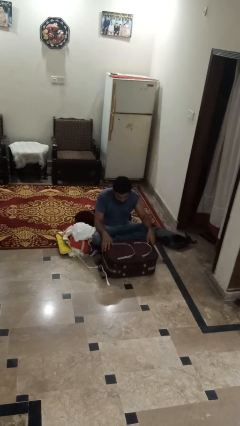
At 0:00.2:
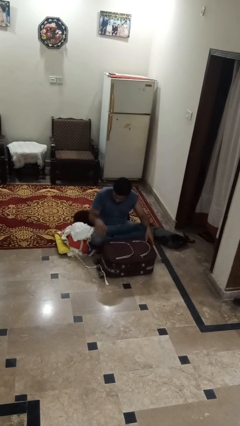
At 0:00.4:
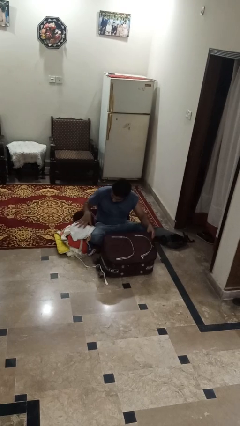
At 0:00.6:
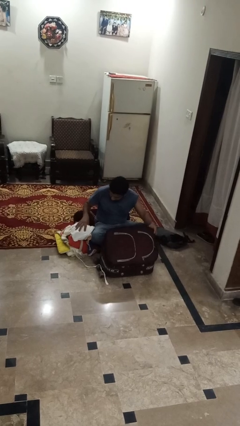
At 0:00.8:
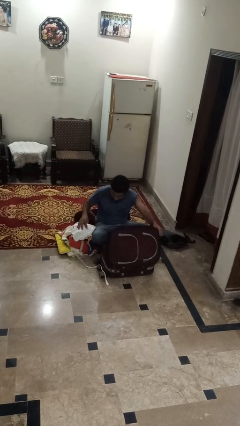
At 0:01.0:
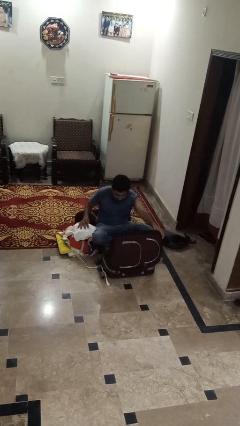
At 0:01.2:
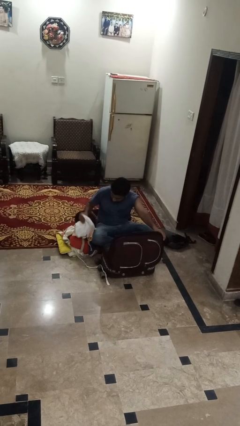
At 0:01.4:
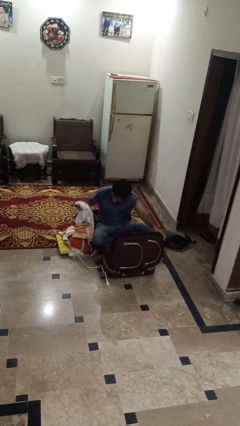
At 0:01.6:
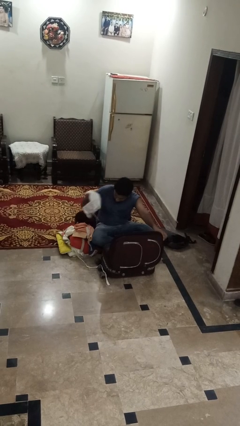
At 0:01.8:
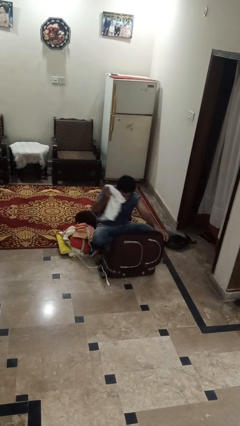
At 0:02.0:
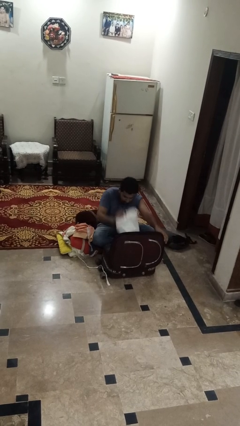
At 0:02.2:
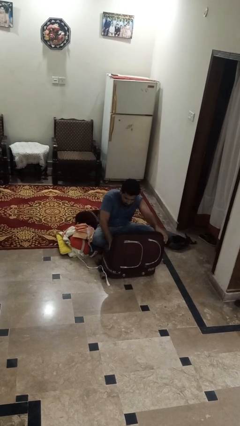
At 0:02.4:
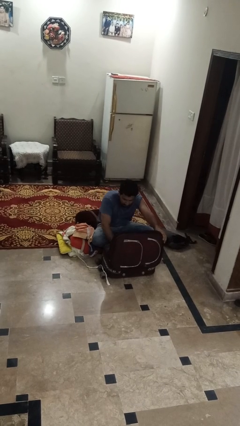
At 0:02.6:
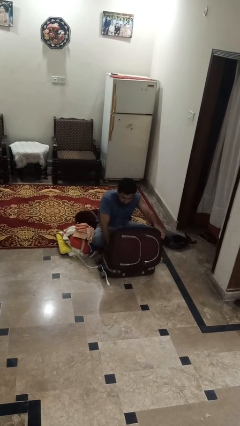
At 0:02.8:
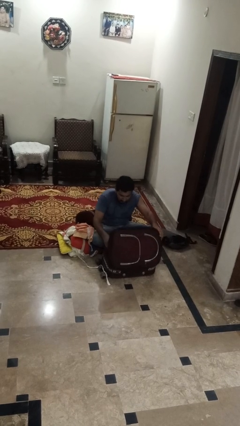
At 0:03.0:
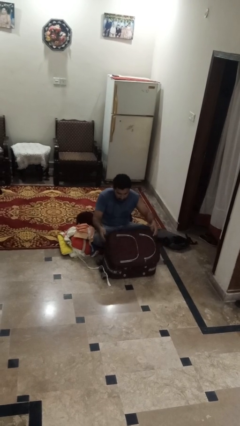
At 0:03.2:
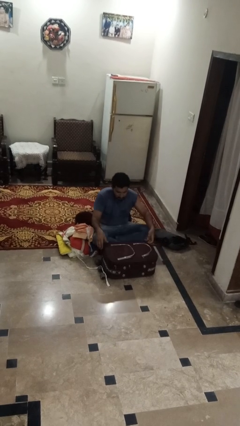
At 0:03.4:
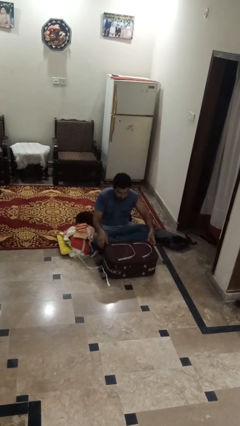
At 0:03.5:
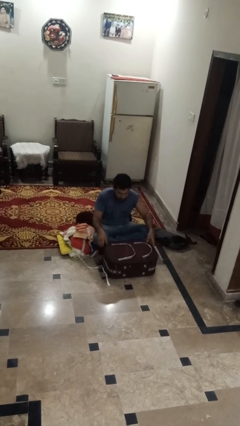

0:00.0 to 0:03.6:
person loads clothes into suitcase

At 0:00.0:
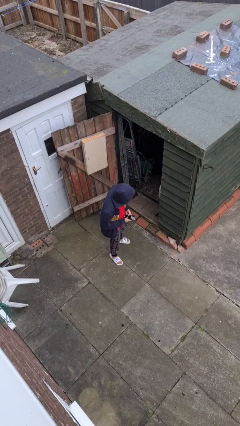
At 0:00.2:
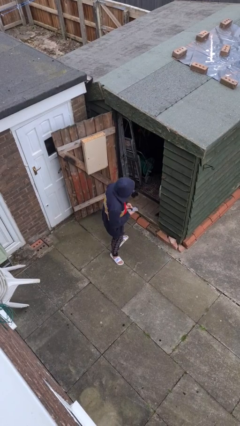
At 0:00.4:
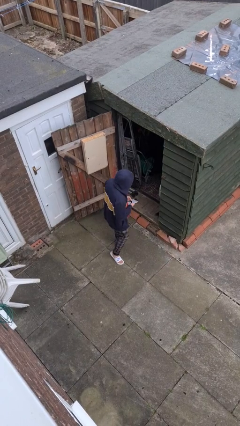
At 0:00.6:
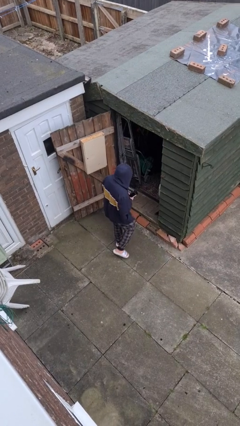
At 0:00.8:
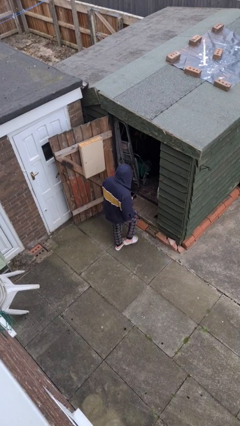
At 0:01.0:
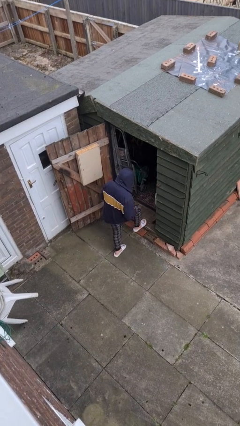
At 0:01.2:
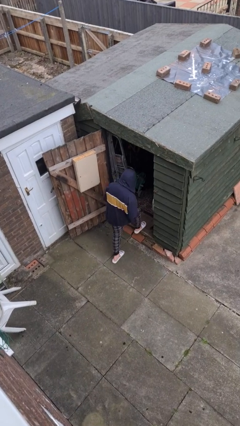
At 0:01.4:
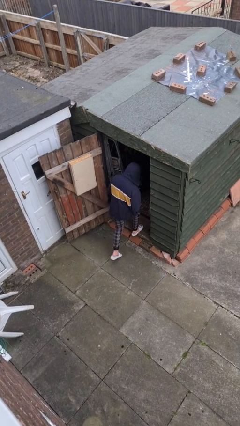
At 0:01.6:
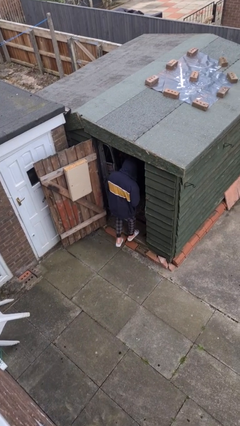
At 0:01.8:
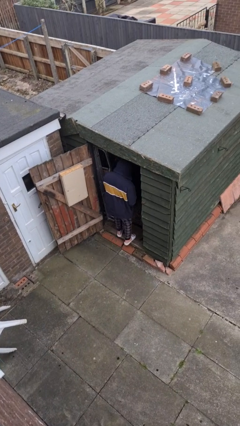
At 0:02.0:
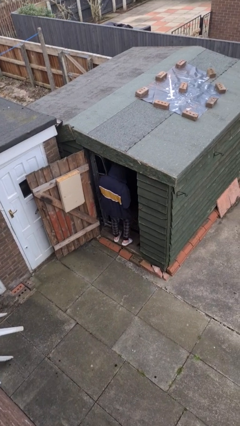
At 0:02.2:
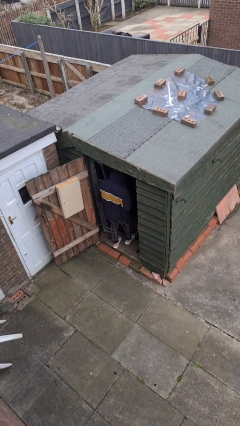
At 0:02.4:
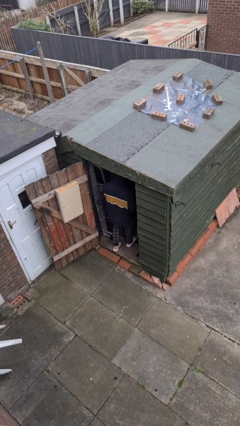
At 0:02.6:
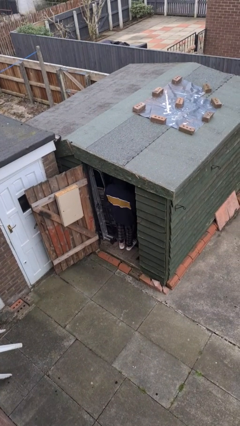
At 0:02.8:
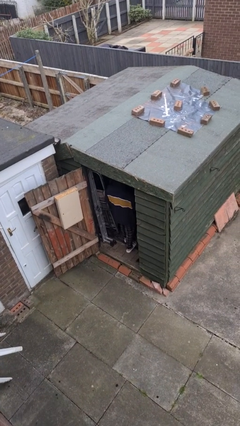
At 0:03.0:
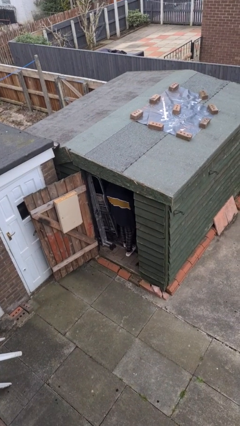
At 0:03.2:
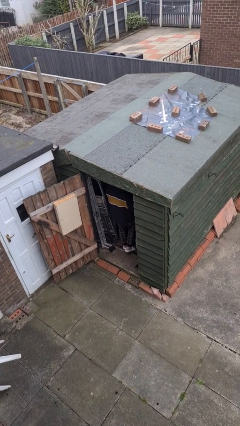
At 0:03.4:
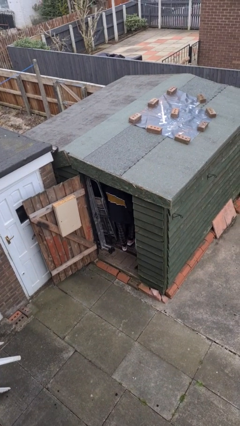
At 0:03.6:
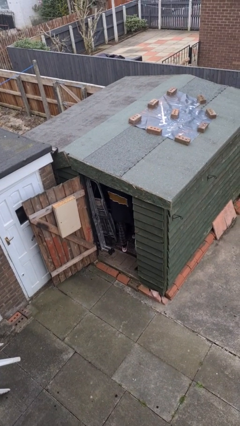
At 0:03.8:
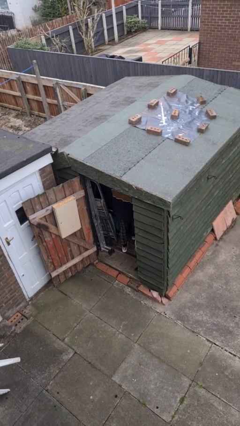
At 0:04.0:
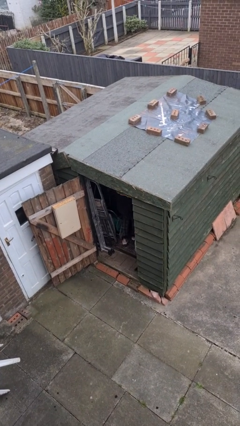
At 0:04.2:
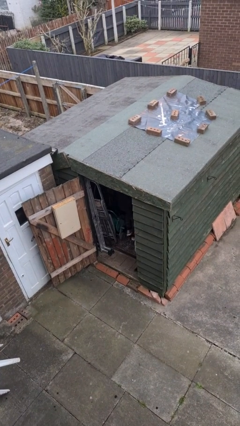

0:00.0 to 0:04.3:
person exits scene through structure

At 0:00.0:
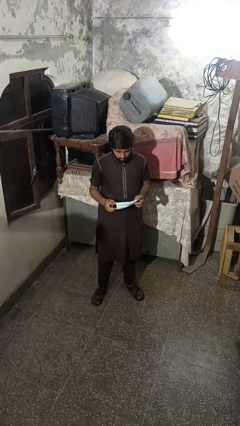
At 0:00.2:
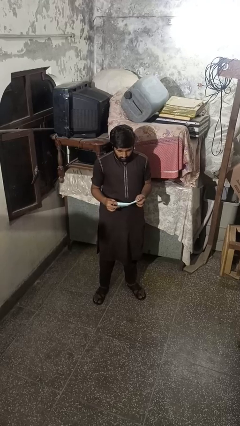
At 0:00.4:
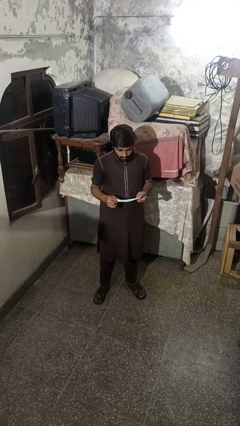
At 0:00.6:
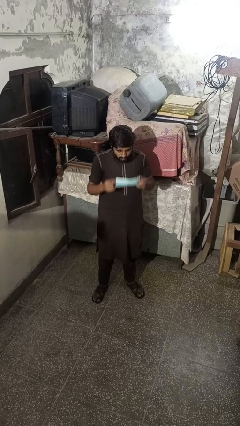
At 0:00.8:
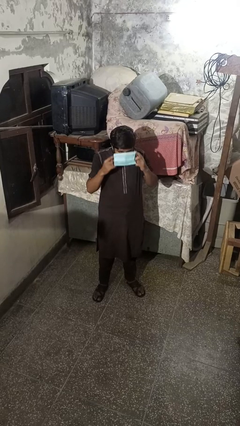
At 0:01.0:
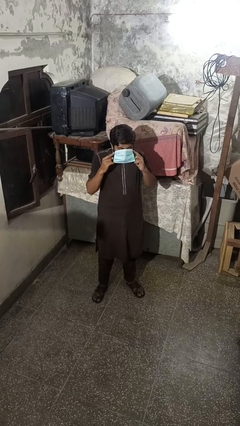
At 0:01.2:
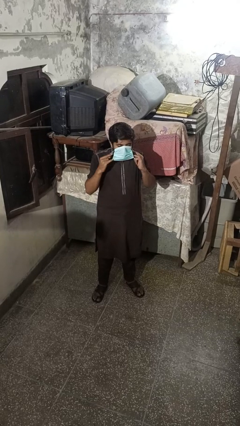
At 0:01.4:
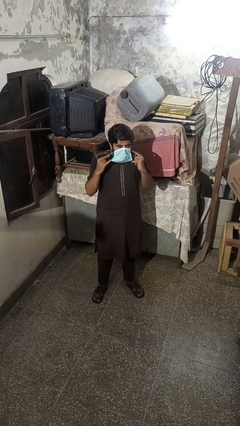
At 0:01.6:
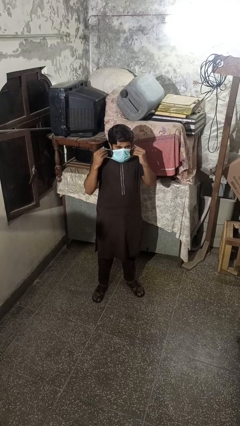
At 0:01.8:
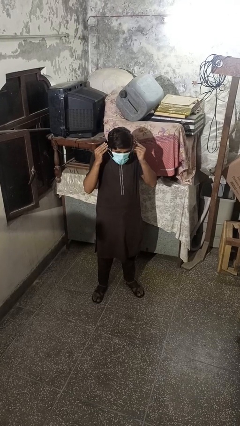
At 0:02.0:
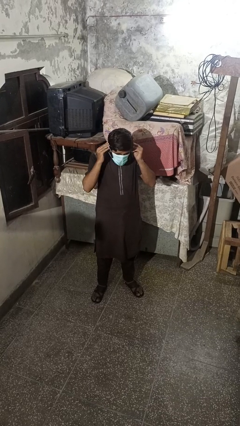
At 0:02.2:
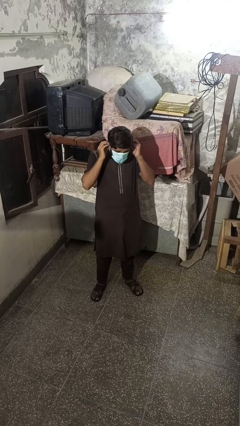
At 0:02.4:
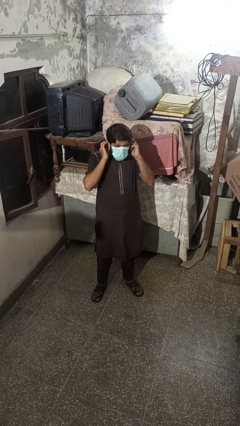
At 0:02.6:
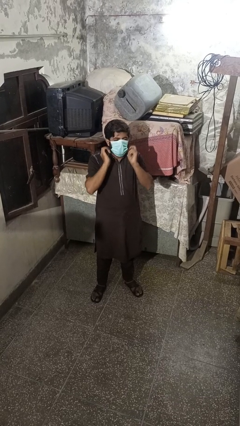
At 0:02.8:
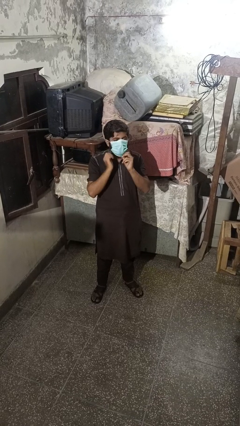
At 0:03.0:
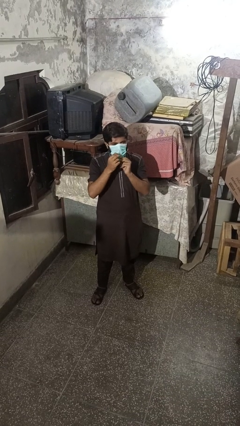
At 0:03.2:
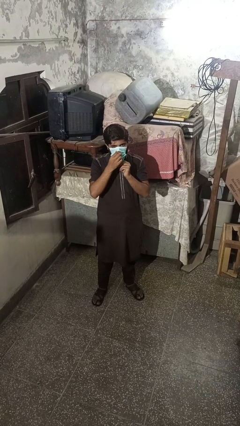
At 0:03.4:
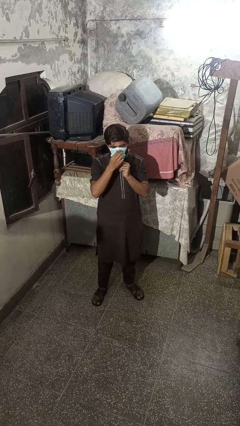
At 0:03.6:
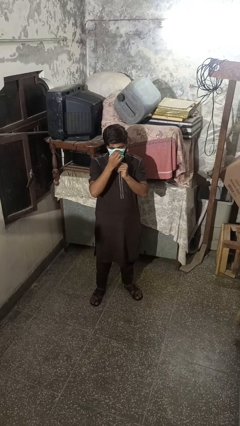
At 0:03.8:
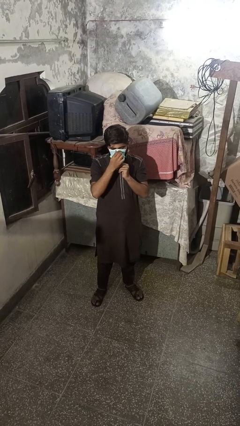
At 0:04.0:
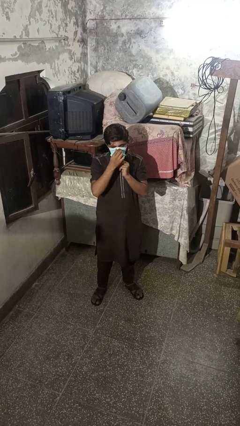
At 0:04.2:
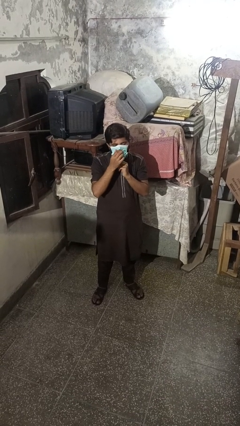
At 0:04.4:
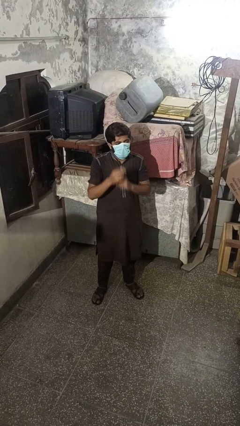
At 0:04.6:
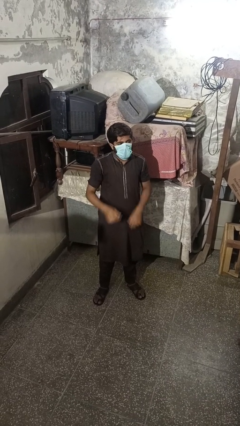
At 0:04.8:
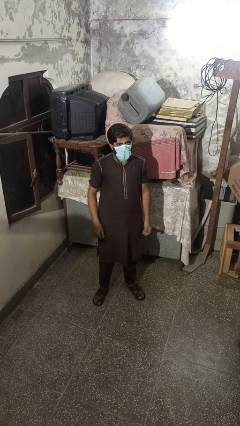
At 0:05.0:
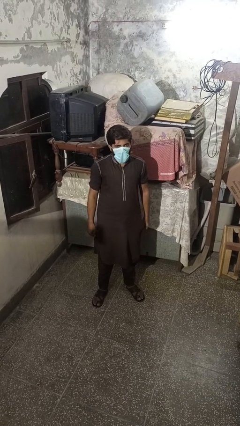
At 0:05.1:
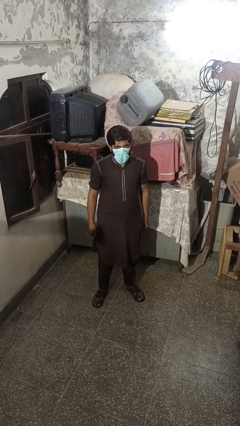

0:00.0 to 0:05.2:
person puts on facemask

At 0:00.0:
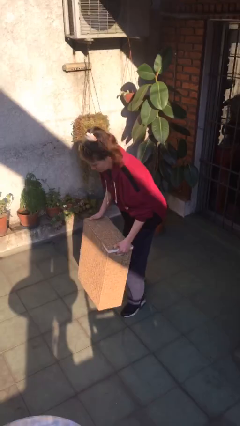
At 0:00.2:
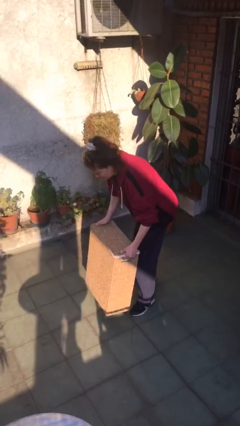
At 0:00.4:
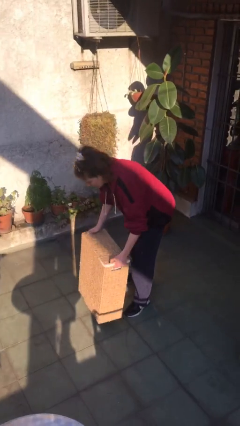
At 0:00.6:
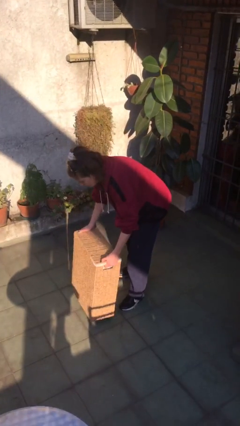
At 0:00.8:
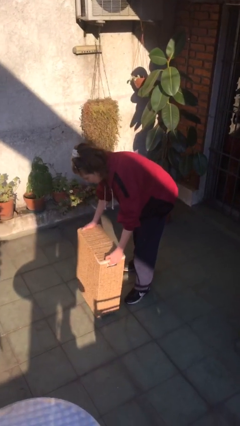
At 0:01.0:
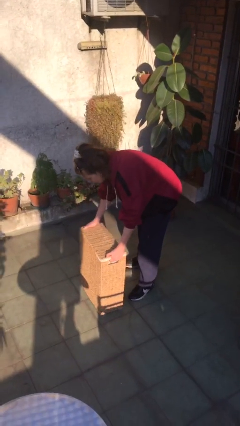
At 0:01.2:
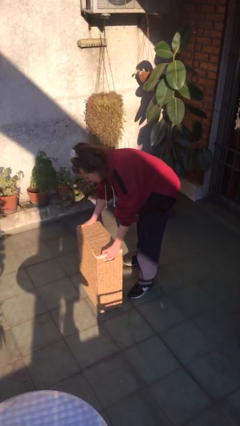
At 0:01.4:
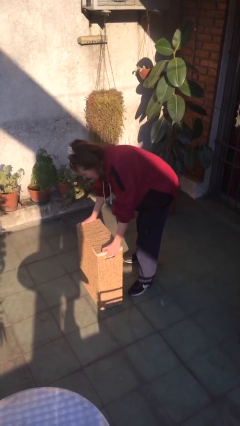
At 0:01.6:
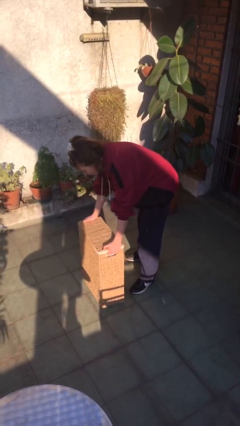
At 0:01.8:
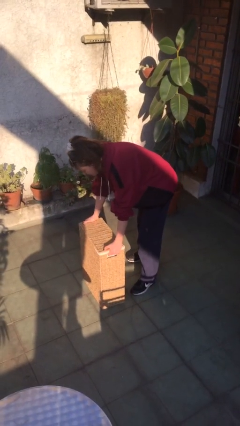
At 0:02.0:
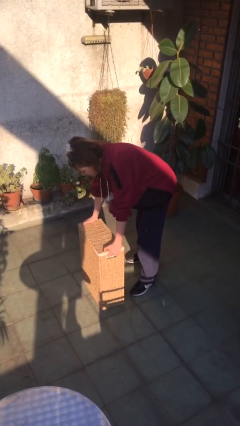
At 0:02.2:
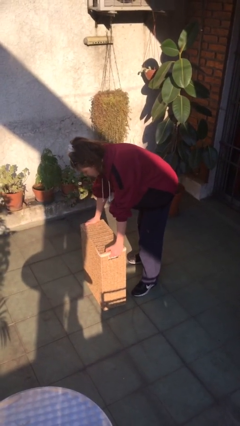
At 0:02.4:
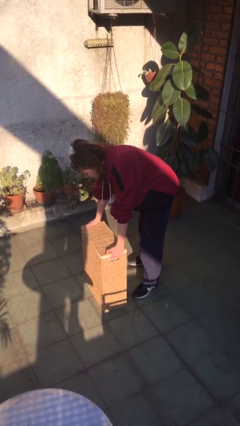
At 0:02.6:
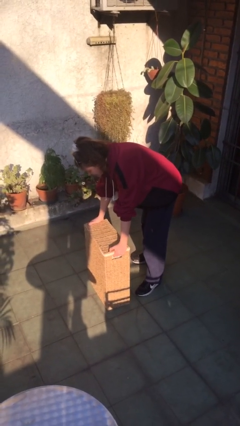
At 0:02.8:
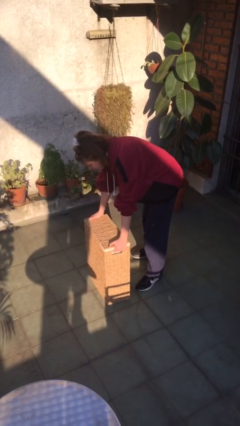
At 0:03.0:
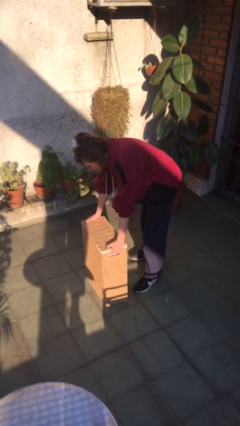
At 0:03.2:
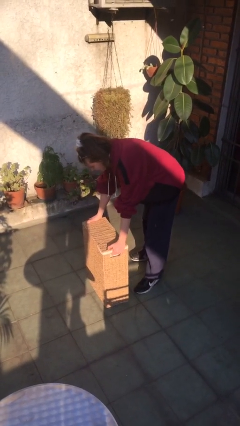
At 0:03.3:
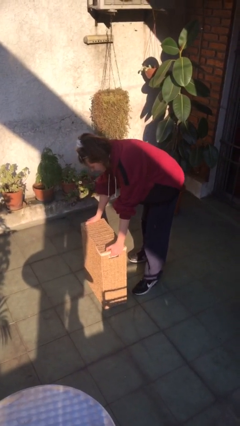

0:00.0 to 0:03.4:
person puts down object on floor

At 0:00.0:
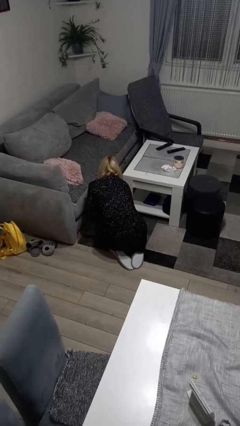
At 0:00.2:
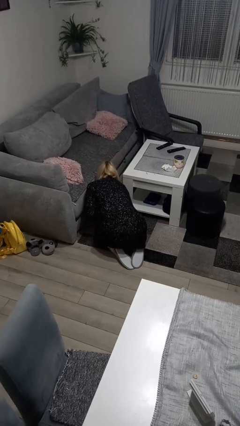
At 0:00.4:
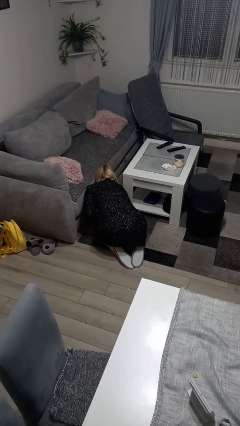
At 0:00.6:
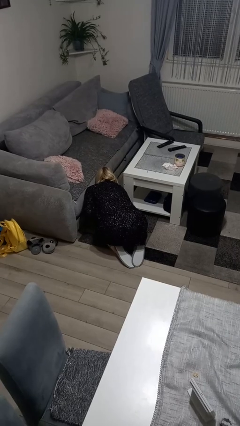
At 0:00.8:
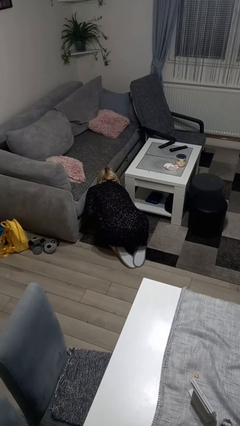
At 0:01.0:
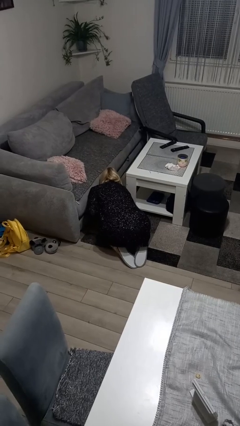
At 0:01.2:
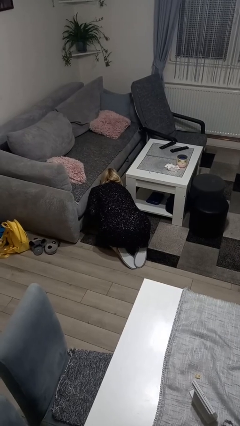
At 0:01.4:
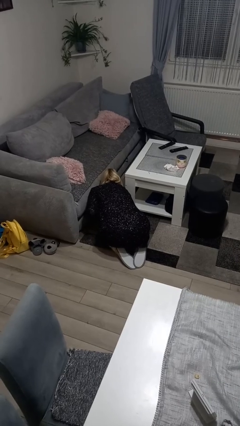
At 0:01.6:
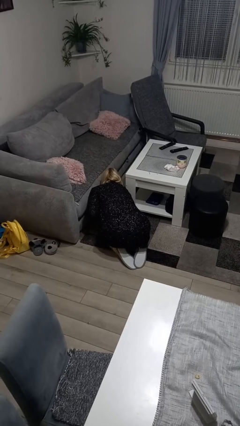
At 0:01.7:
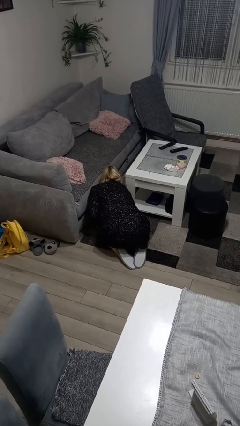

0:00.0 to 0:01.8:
person searches under couch
